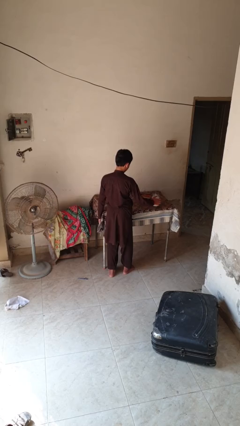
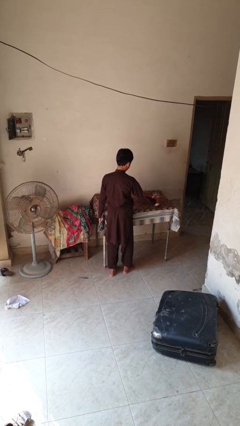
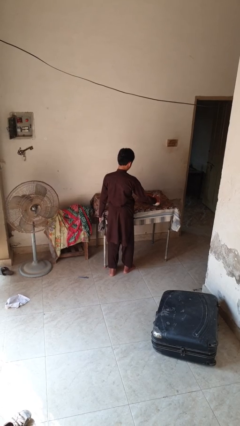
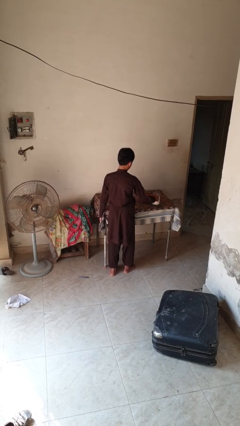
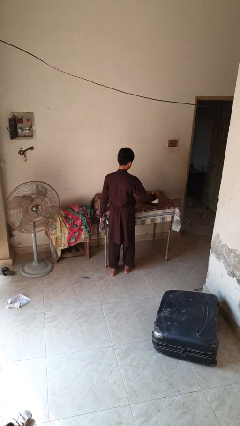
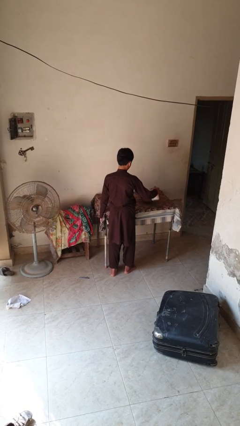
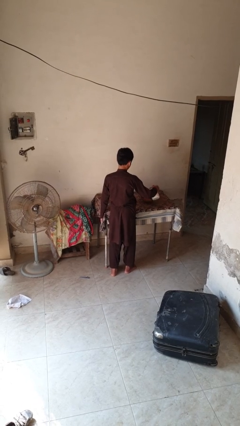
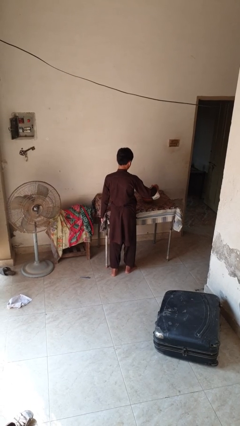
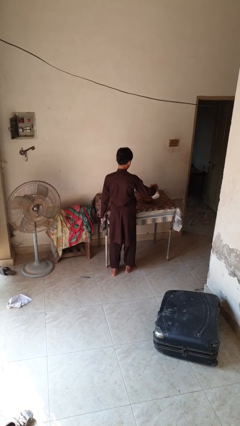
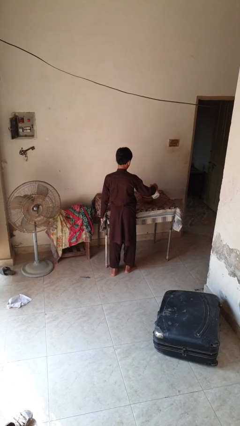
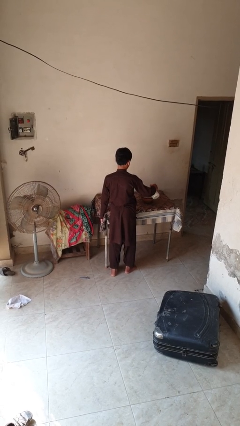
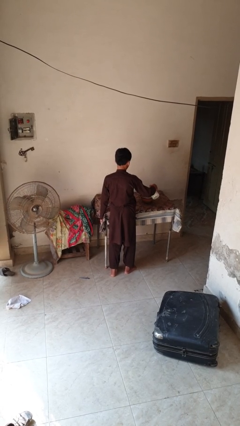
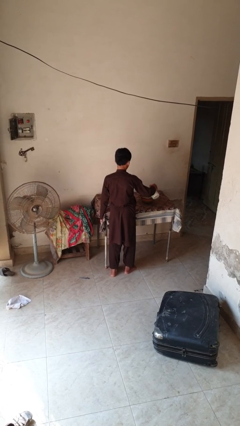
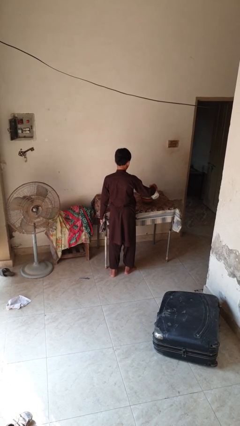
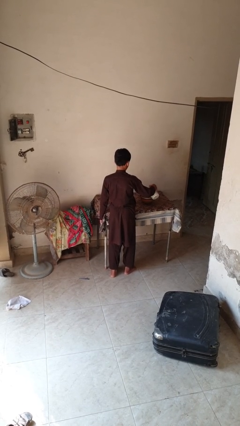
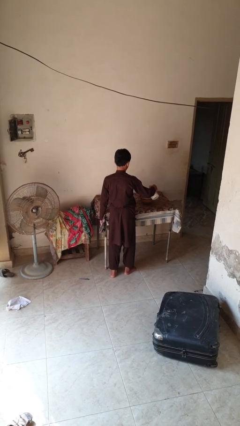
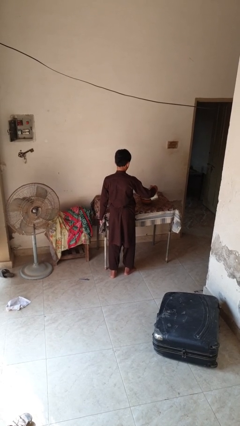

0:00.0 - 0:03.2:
person pours into bowl

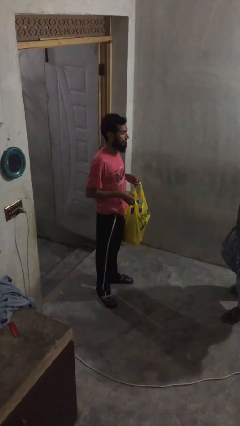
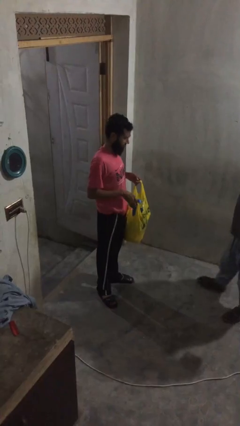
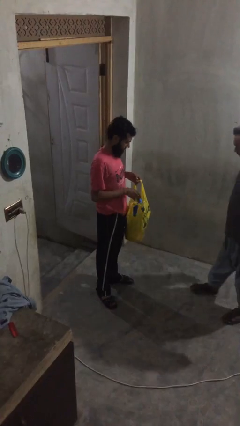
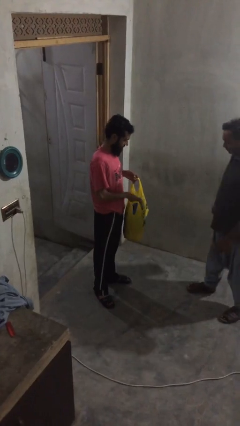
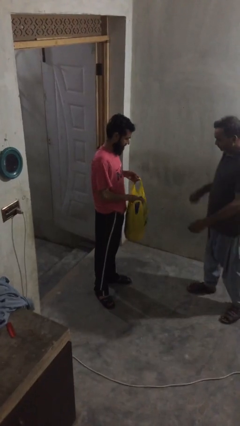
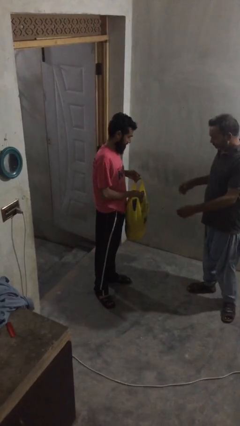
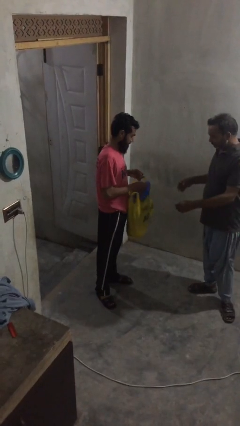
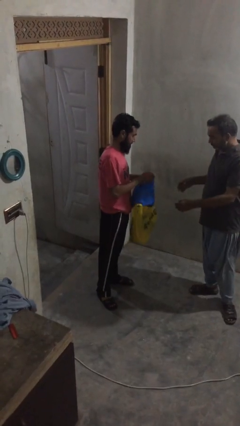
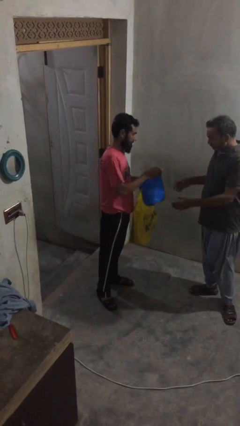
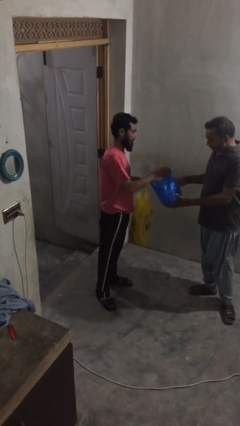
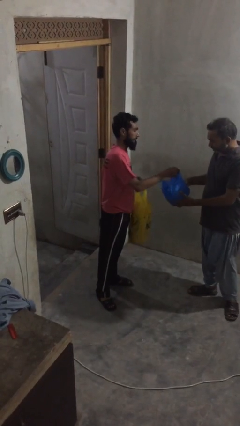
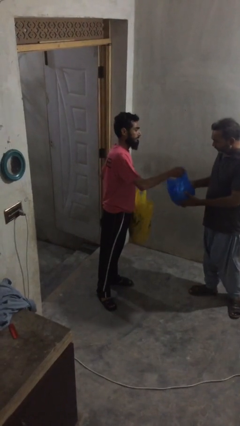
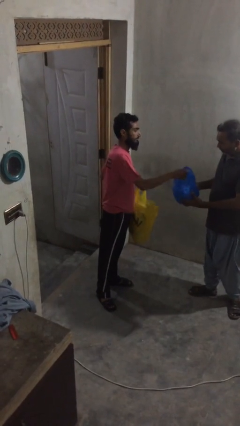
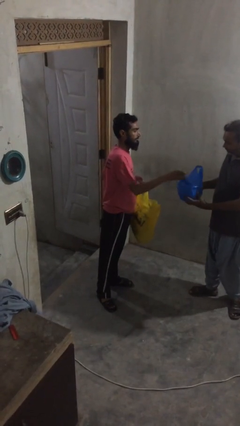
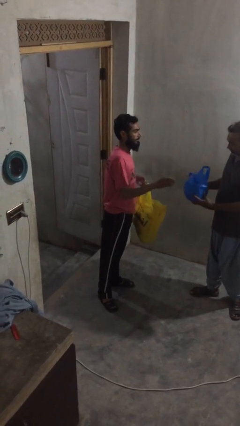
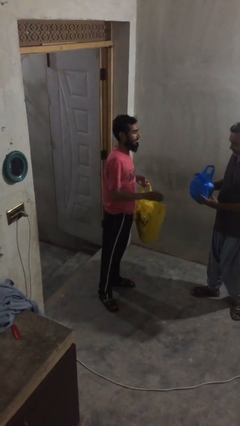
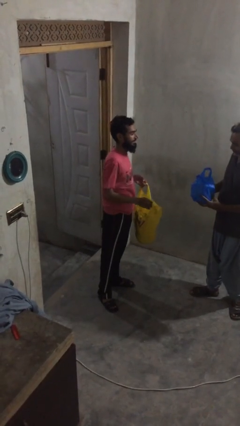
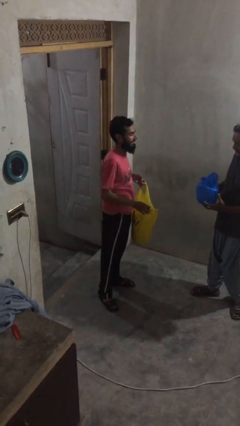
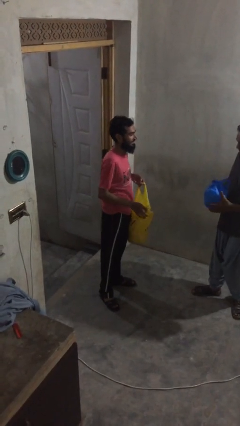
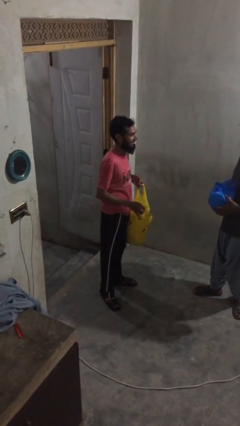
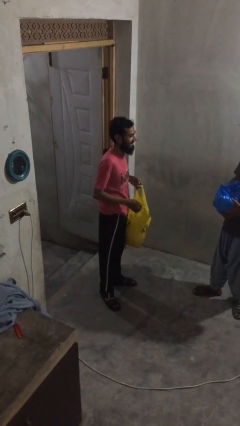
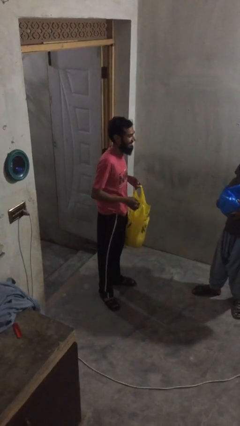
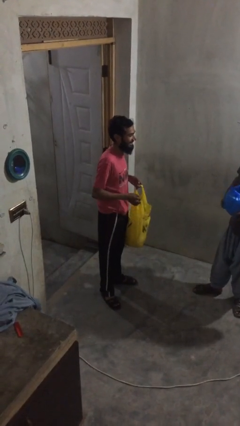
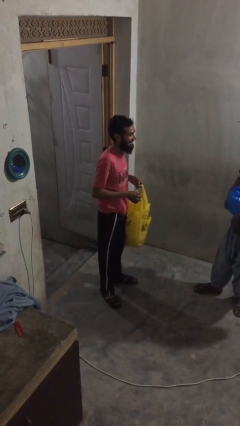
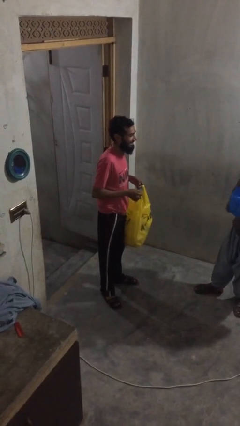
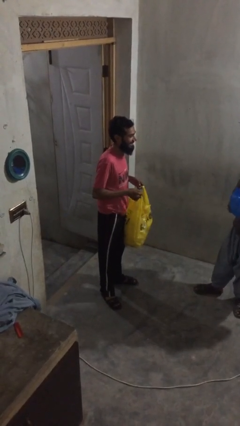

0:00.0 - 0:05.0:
person transfers object to person

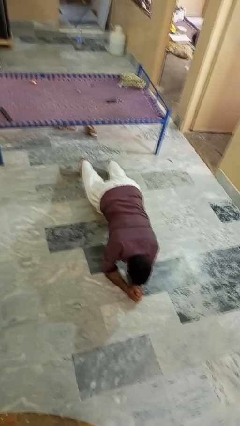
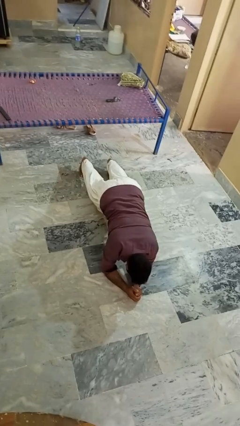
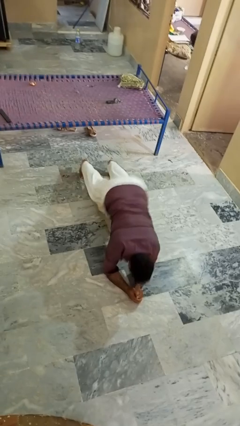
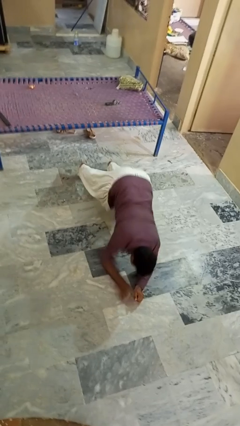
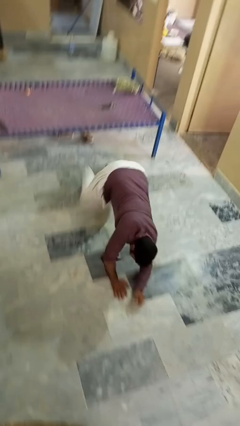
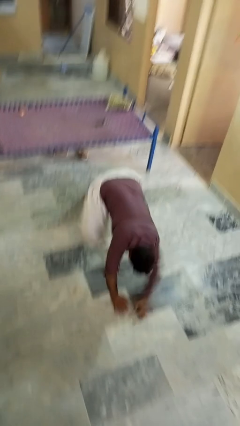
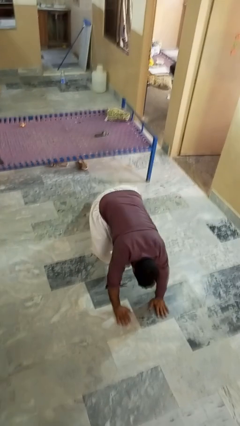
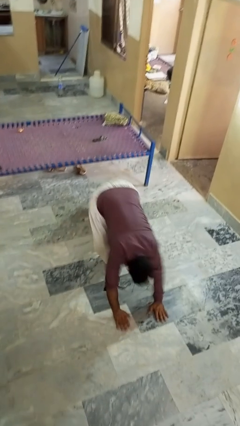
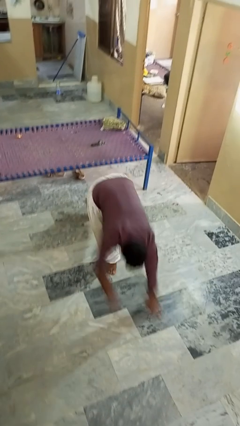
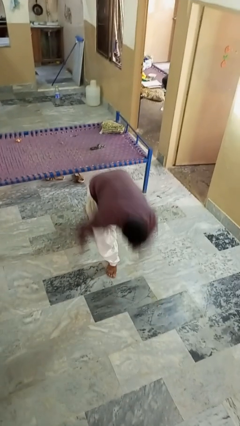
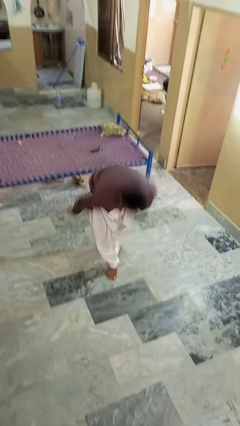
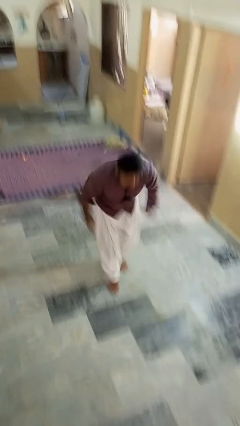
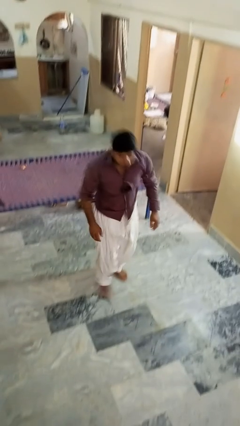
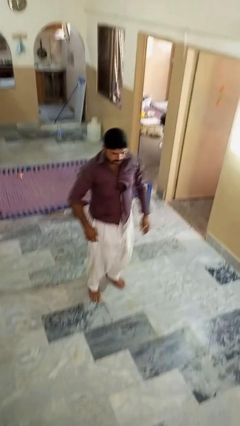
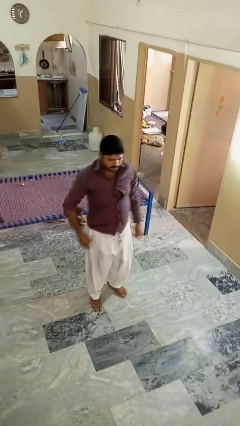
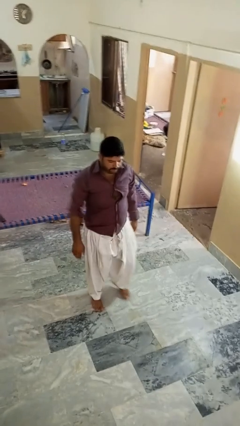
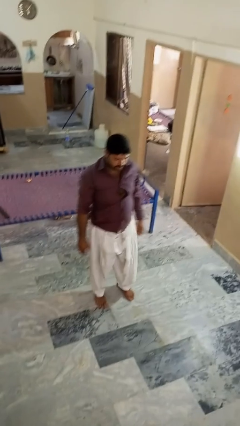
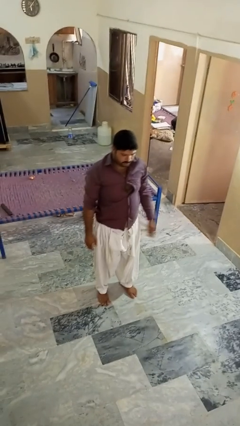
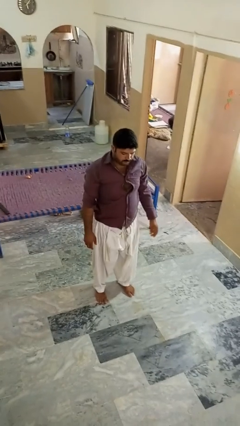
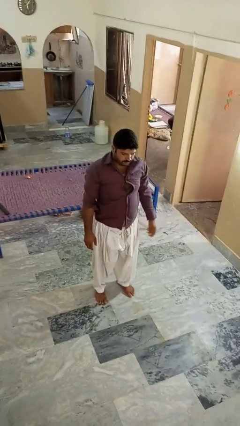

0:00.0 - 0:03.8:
person stands up from floor

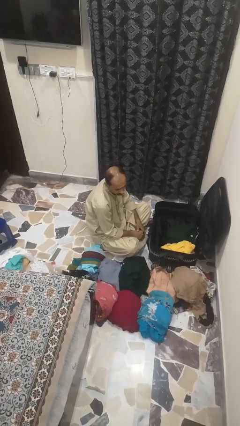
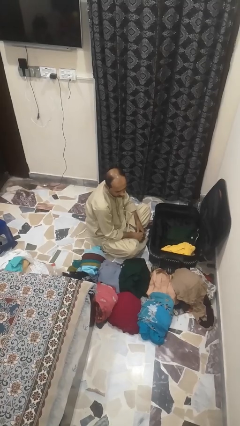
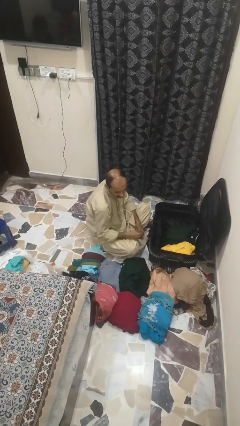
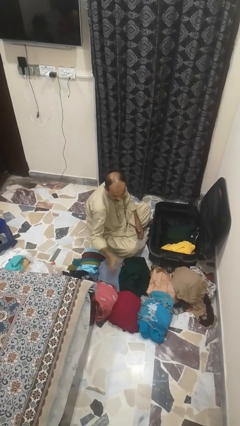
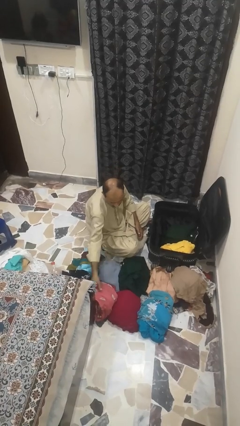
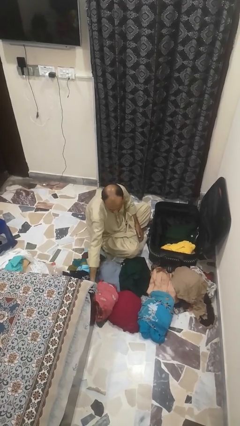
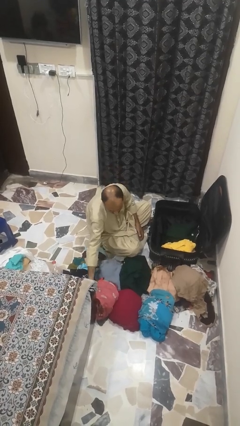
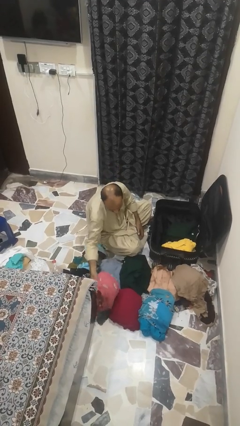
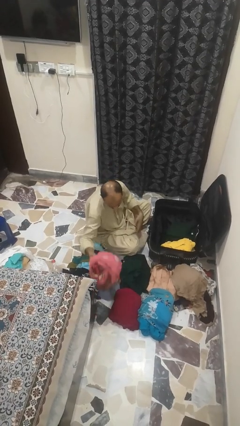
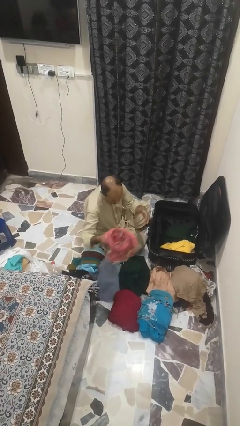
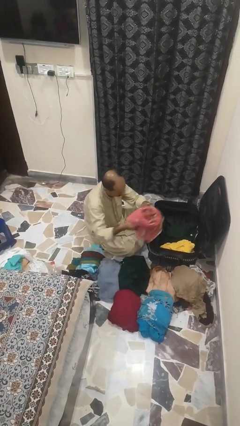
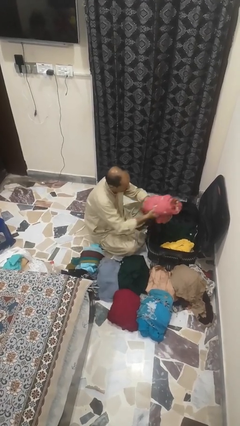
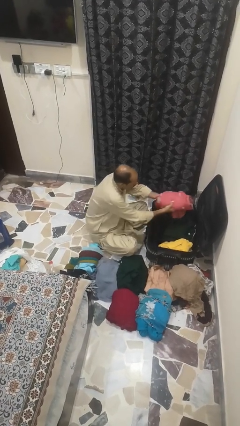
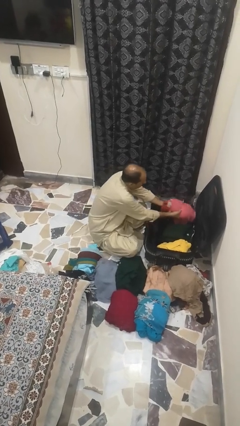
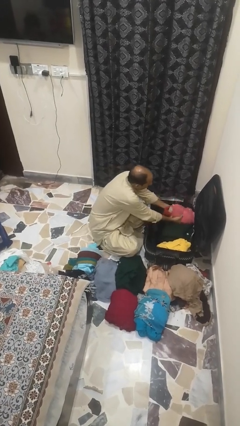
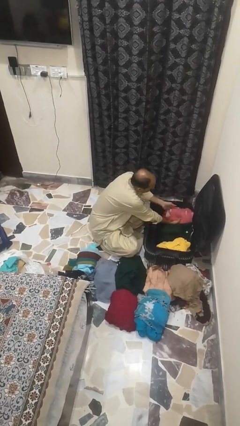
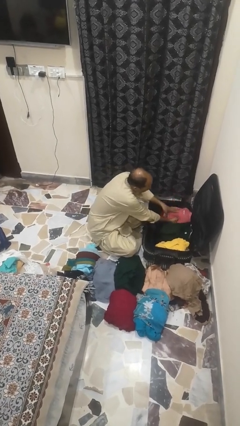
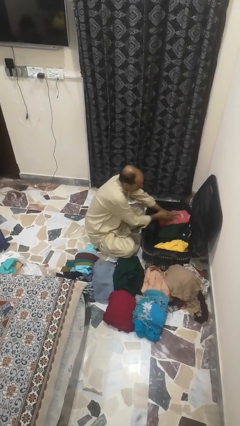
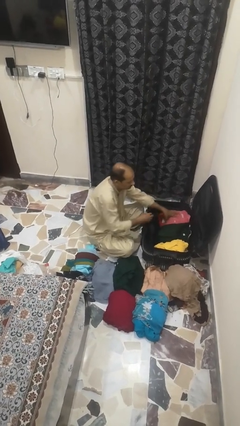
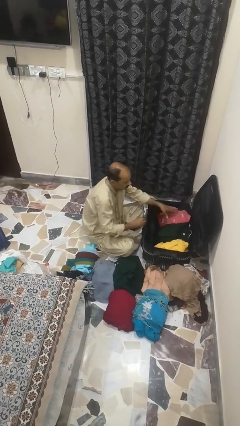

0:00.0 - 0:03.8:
person loads clothes into suitcase

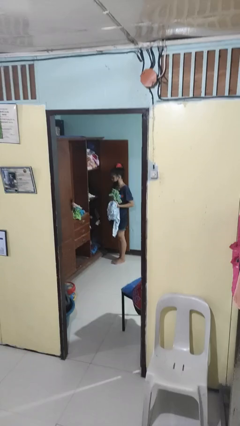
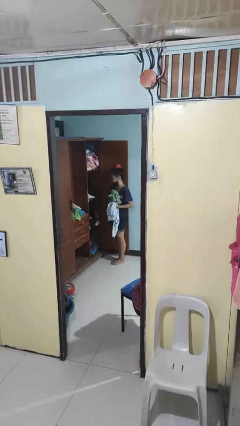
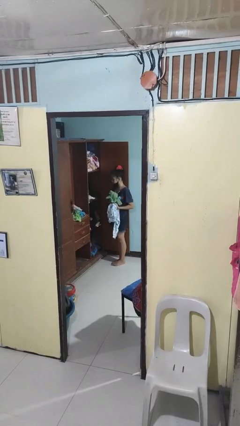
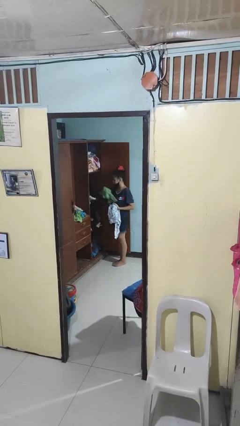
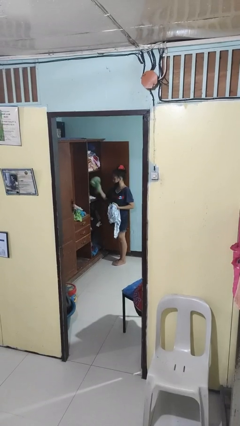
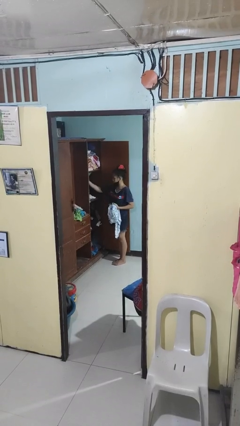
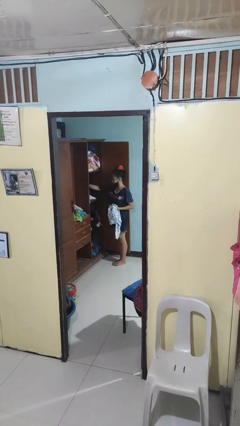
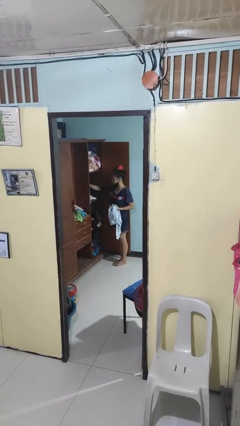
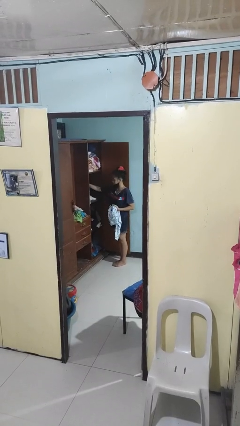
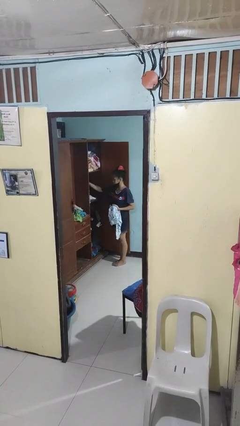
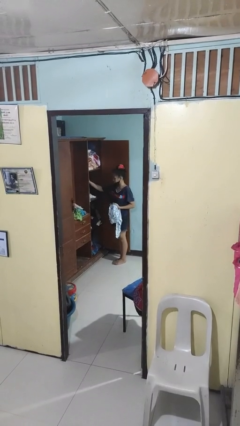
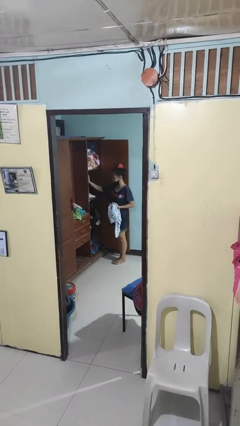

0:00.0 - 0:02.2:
person puts clothes into dresser
